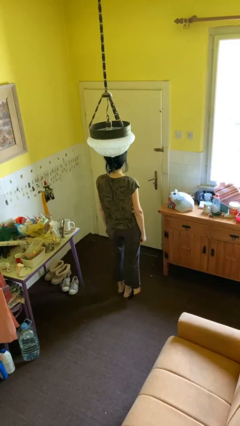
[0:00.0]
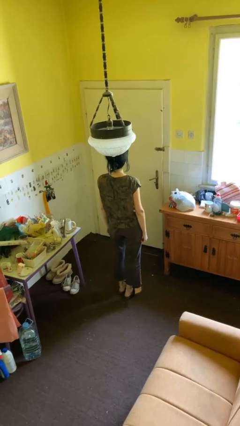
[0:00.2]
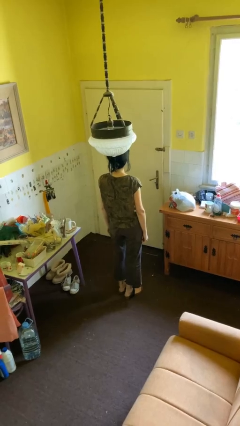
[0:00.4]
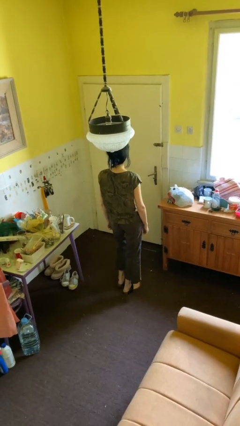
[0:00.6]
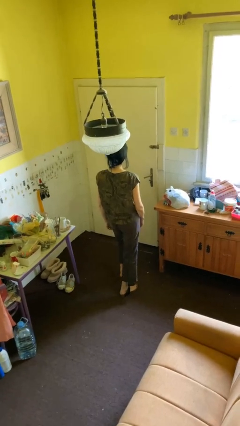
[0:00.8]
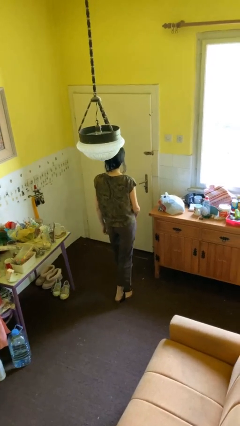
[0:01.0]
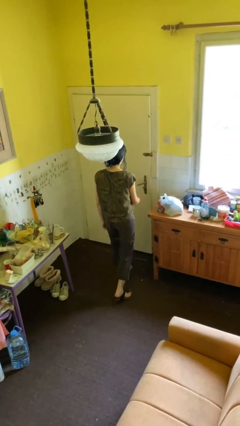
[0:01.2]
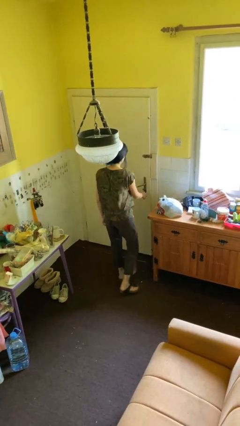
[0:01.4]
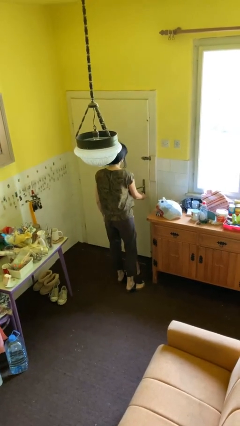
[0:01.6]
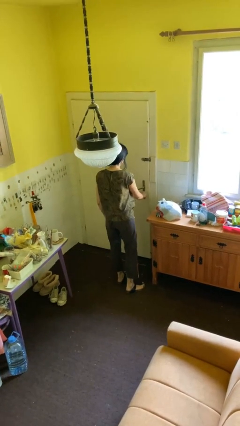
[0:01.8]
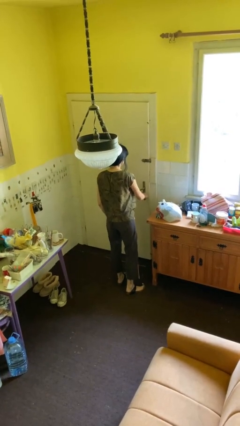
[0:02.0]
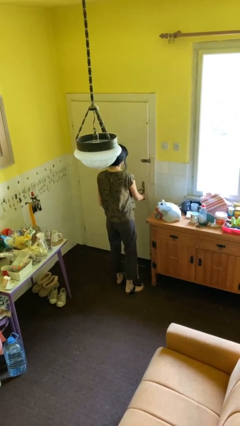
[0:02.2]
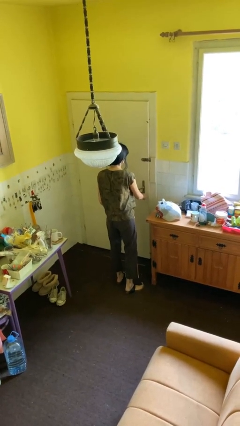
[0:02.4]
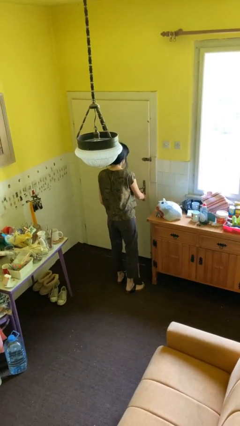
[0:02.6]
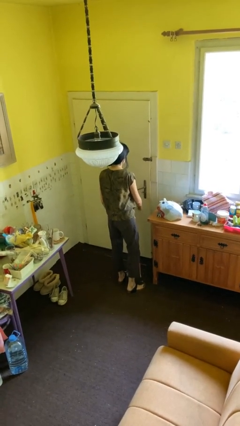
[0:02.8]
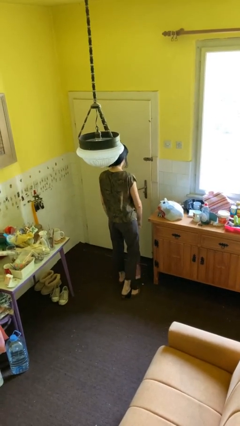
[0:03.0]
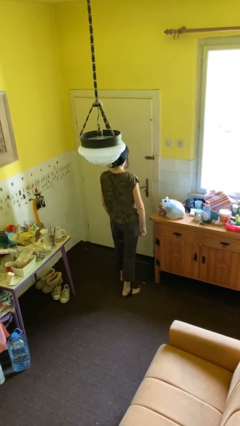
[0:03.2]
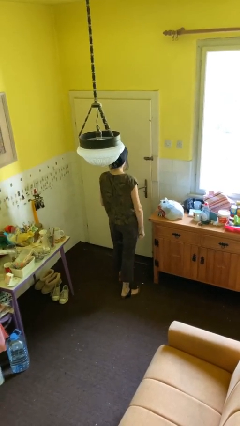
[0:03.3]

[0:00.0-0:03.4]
person unlocks door with keys

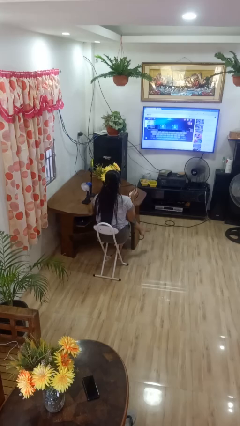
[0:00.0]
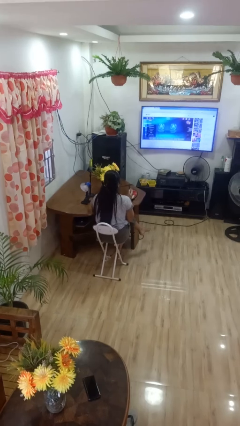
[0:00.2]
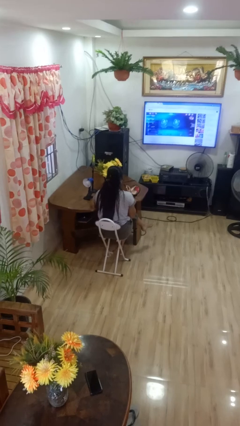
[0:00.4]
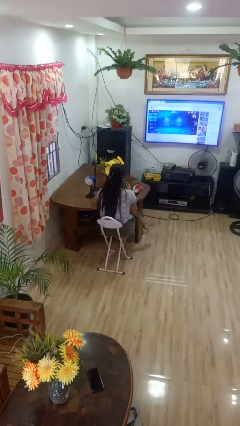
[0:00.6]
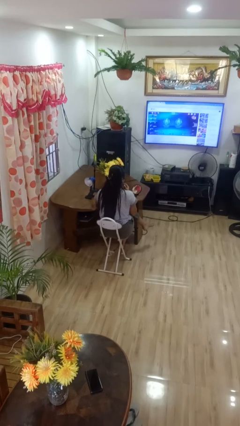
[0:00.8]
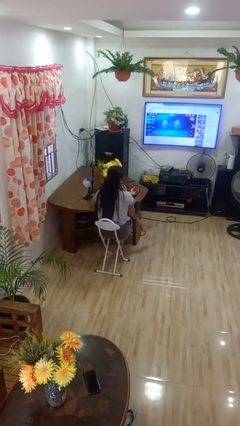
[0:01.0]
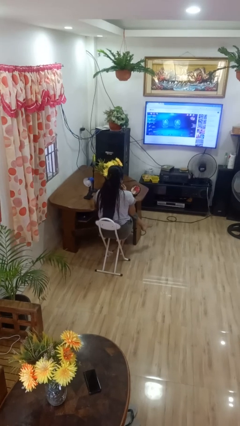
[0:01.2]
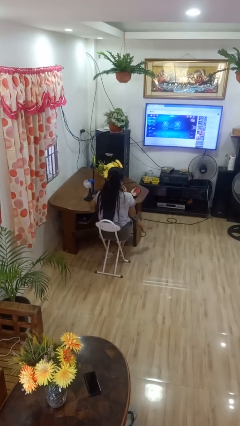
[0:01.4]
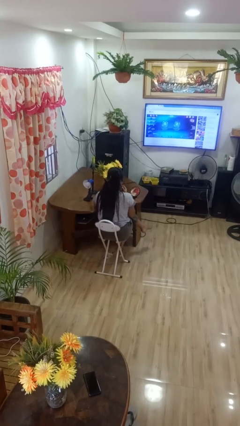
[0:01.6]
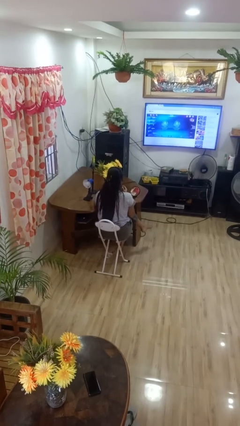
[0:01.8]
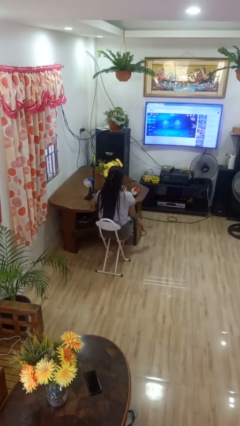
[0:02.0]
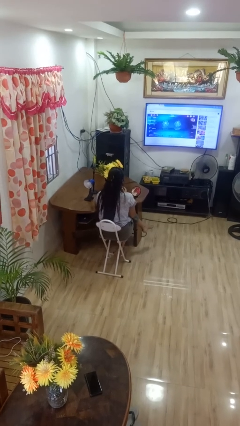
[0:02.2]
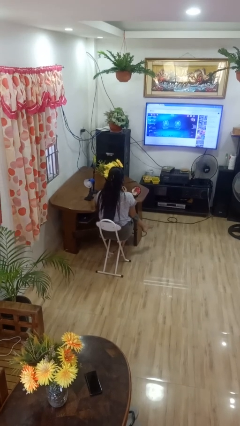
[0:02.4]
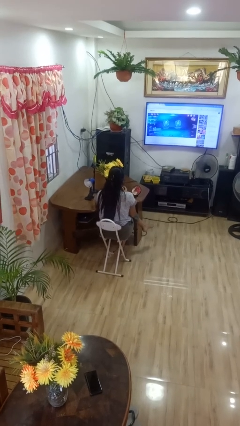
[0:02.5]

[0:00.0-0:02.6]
person applies lip makeup

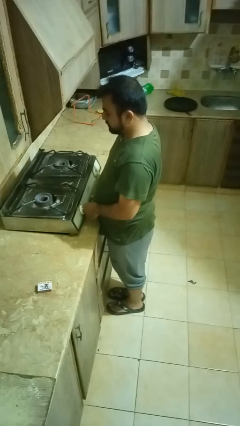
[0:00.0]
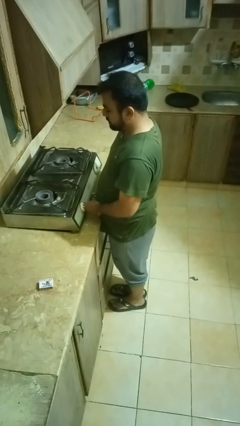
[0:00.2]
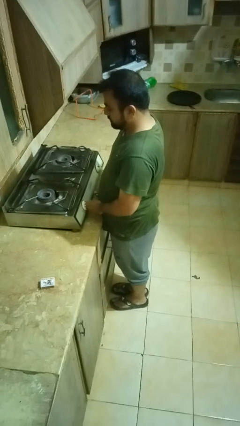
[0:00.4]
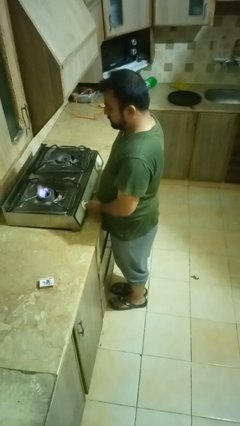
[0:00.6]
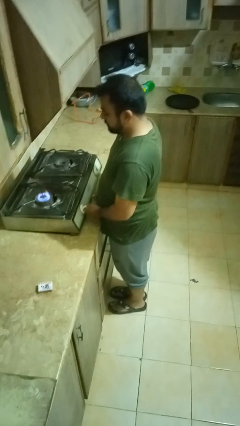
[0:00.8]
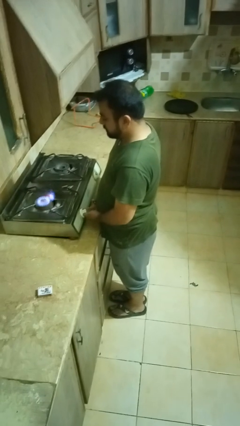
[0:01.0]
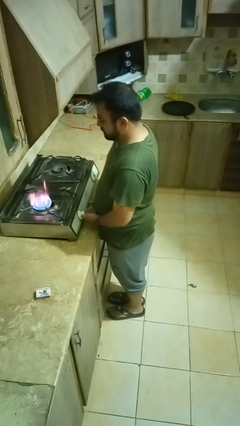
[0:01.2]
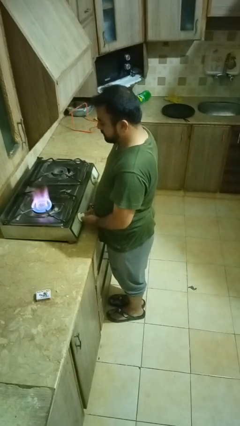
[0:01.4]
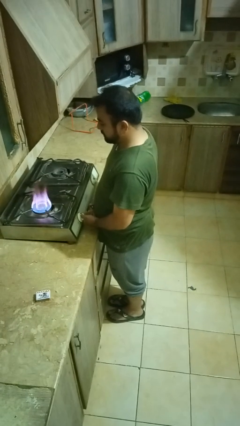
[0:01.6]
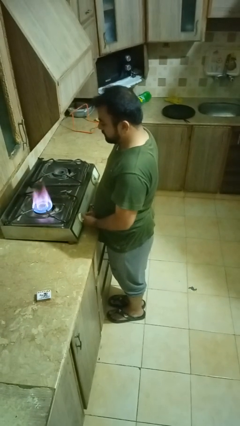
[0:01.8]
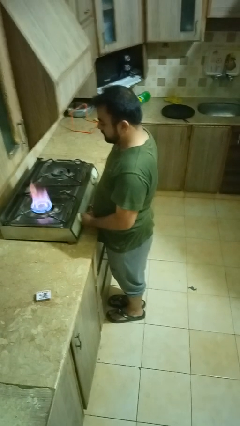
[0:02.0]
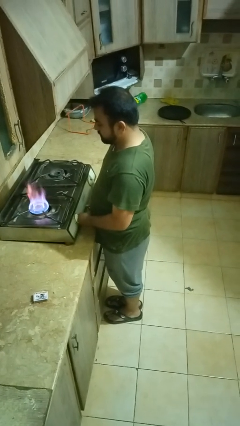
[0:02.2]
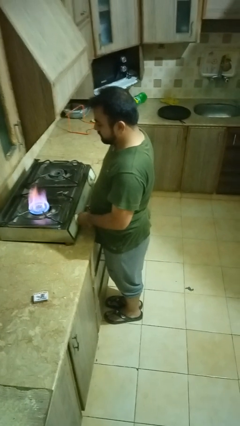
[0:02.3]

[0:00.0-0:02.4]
person turns on stovetop

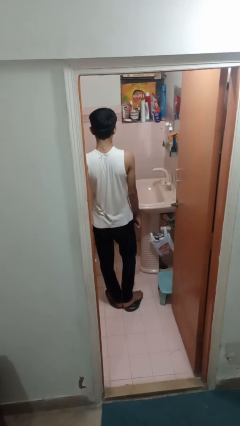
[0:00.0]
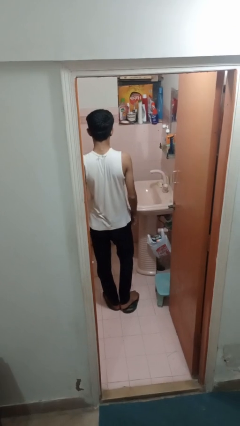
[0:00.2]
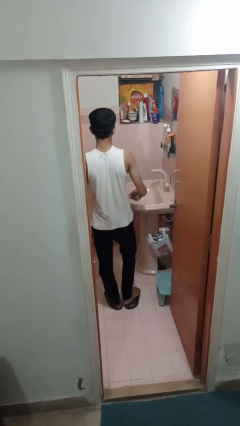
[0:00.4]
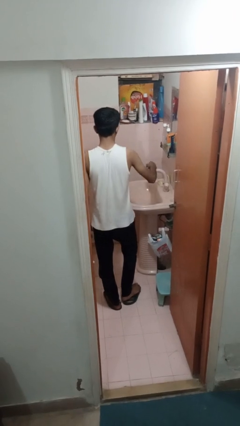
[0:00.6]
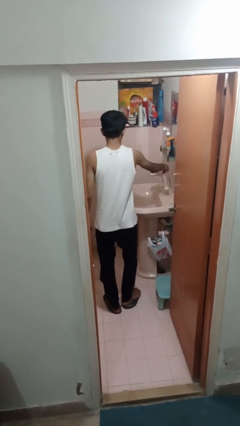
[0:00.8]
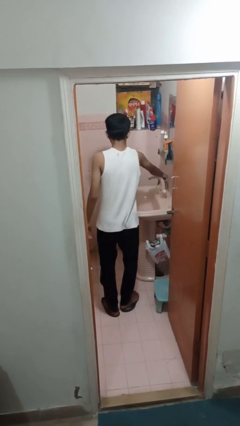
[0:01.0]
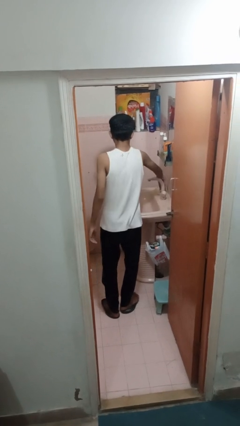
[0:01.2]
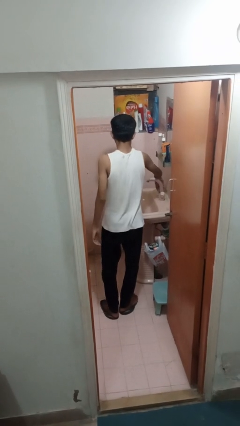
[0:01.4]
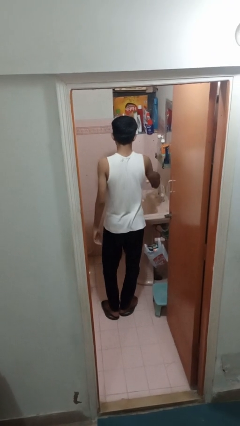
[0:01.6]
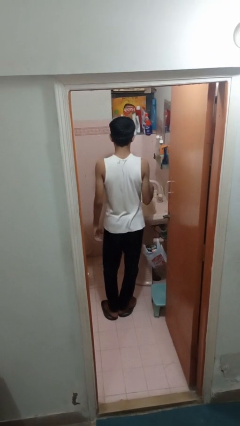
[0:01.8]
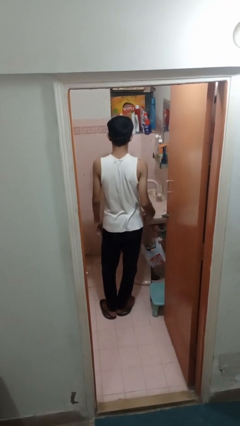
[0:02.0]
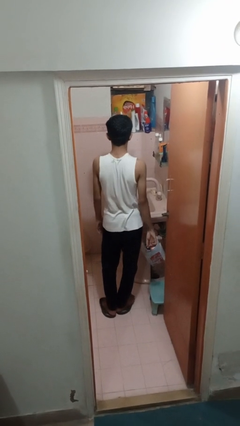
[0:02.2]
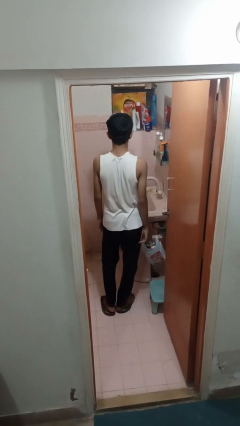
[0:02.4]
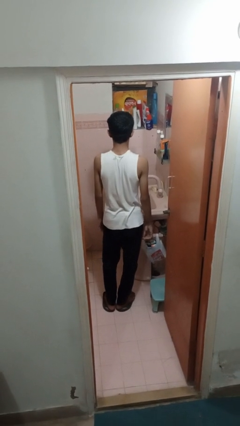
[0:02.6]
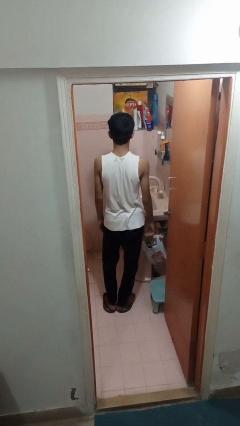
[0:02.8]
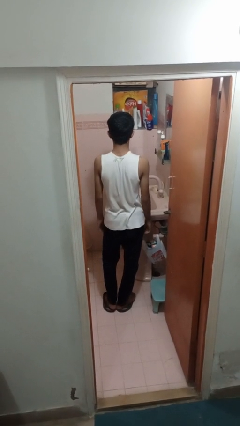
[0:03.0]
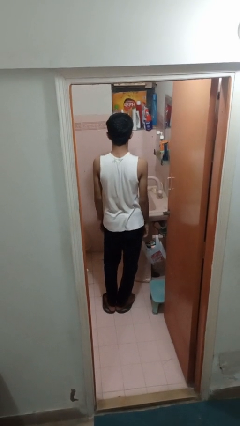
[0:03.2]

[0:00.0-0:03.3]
person turns on faucet

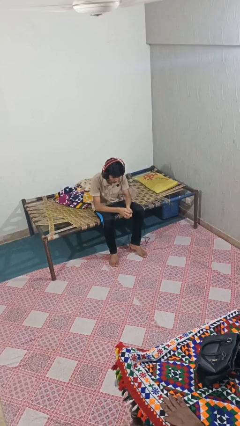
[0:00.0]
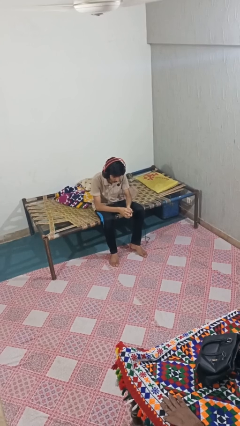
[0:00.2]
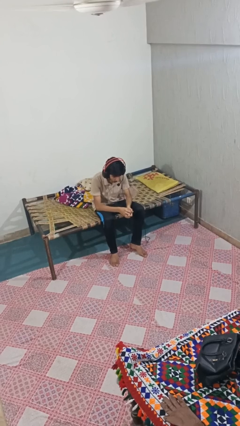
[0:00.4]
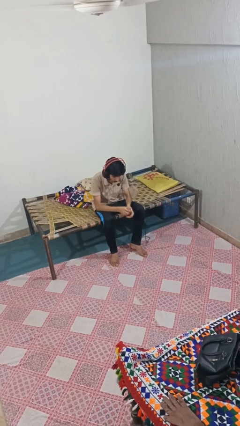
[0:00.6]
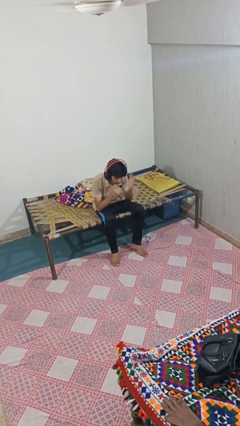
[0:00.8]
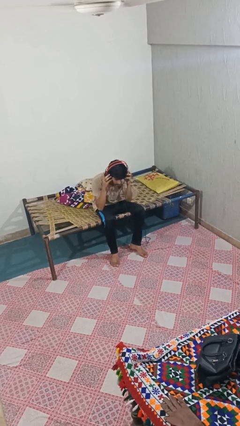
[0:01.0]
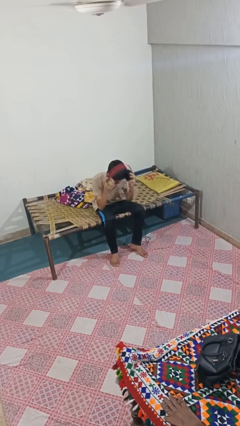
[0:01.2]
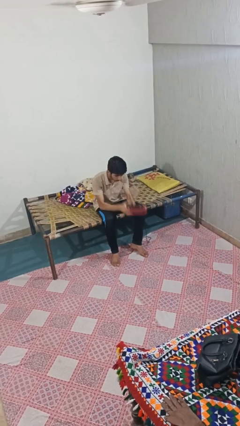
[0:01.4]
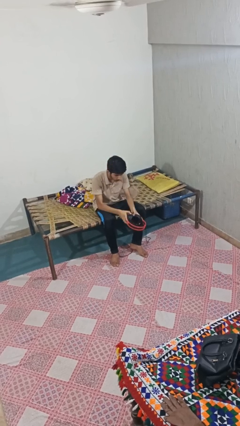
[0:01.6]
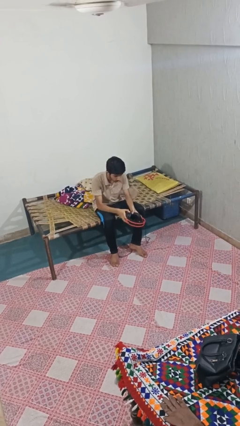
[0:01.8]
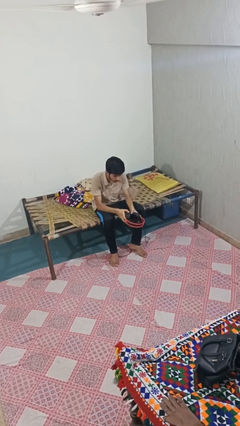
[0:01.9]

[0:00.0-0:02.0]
person takes off headphones

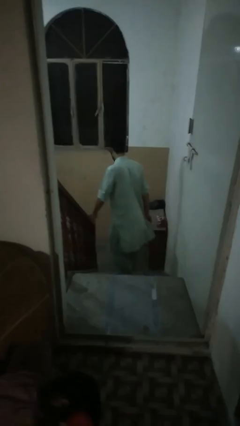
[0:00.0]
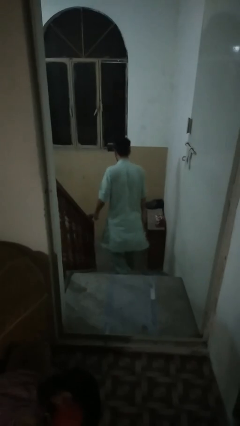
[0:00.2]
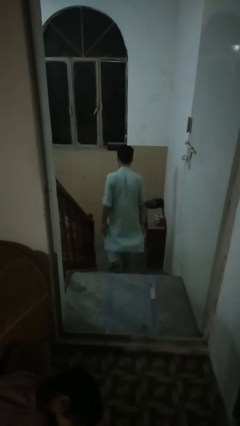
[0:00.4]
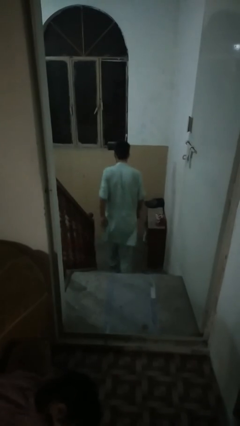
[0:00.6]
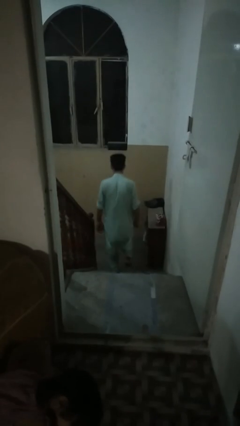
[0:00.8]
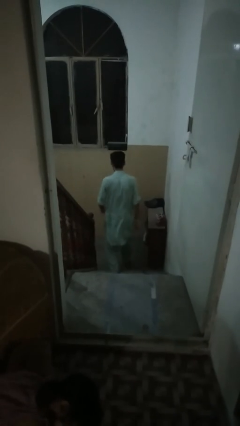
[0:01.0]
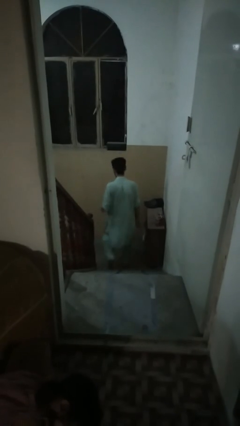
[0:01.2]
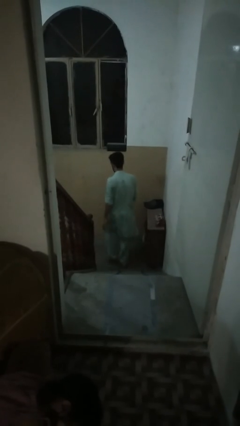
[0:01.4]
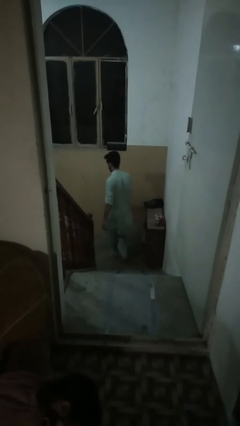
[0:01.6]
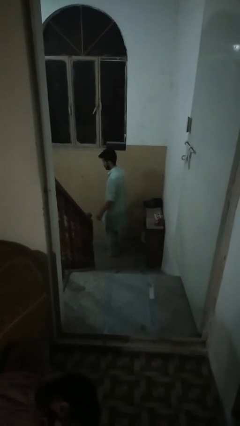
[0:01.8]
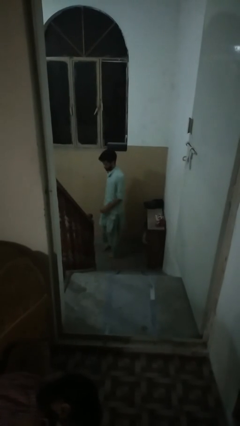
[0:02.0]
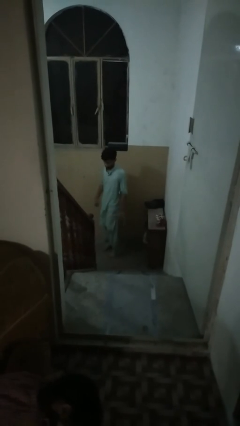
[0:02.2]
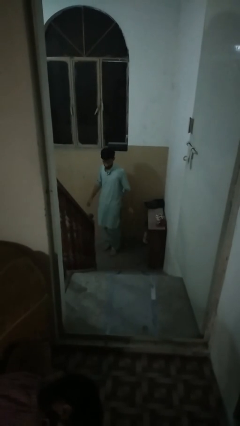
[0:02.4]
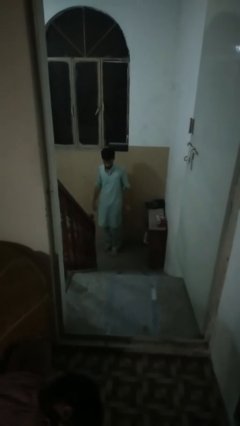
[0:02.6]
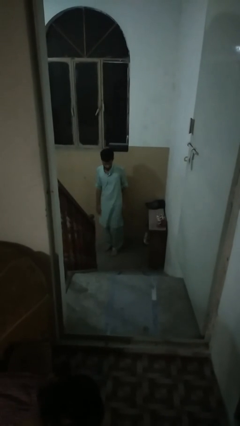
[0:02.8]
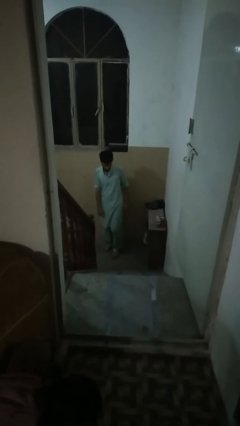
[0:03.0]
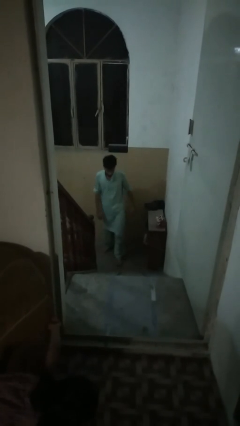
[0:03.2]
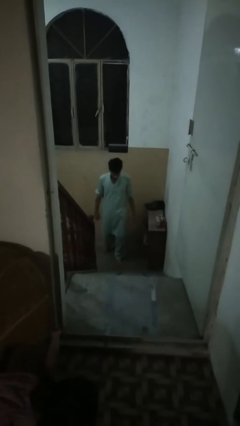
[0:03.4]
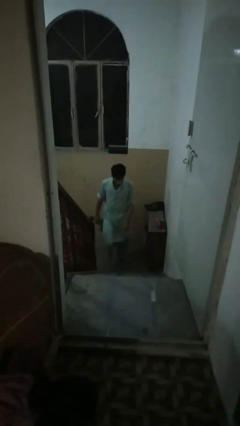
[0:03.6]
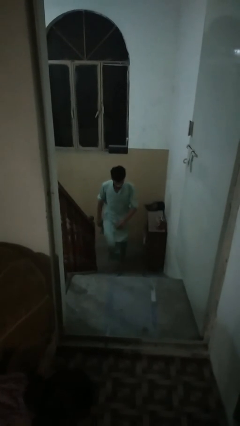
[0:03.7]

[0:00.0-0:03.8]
person climbs down stairs

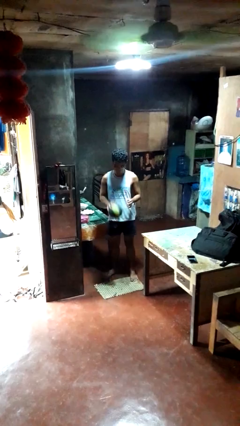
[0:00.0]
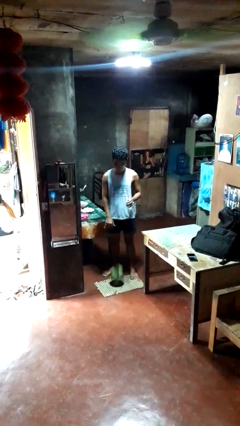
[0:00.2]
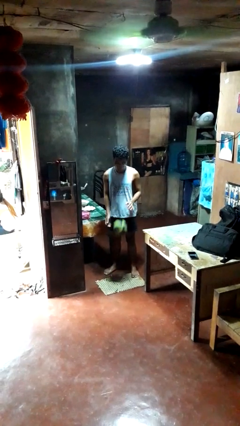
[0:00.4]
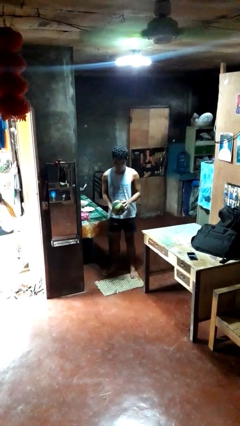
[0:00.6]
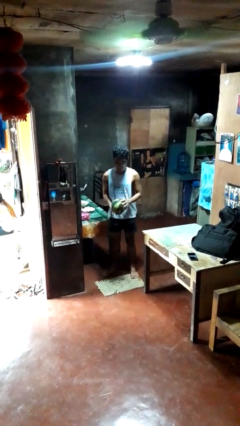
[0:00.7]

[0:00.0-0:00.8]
person bounces ball on floor
